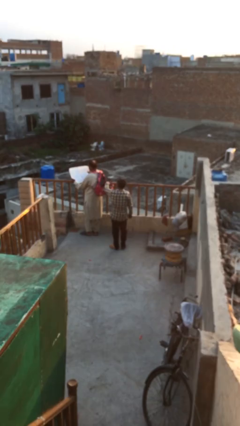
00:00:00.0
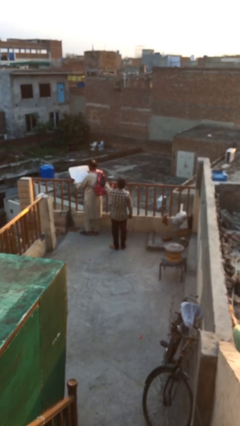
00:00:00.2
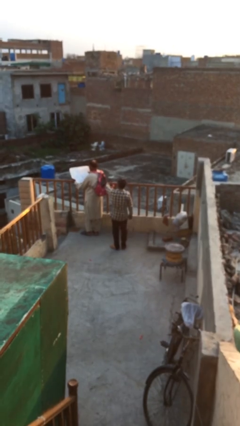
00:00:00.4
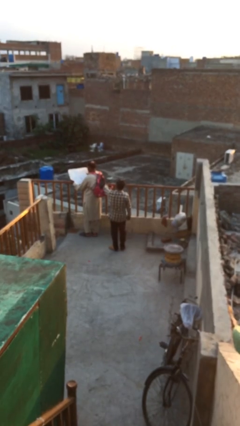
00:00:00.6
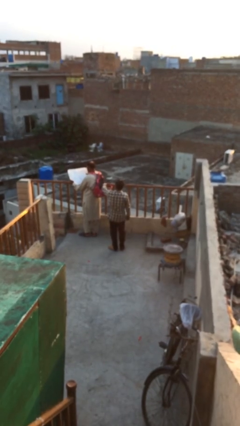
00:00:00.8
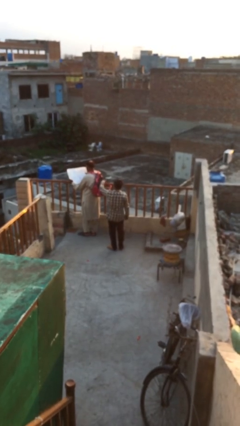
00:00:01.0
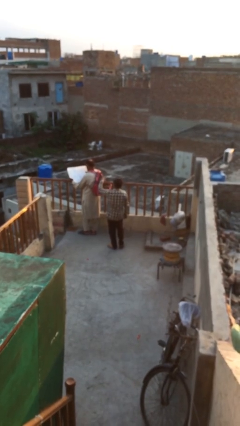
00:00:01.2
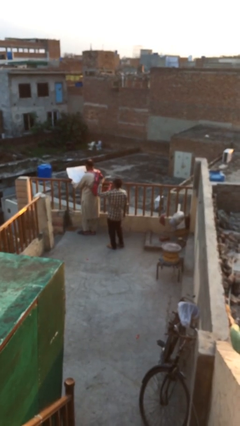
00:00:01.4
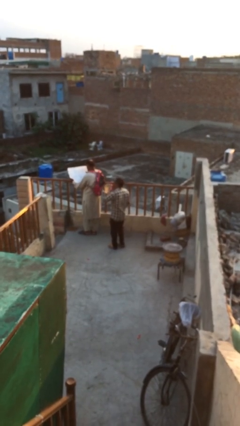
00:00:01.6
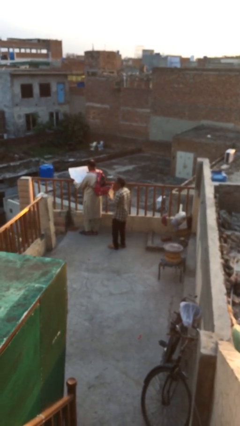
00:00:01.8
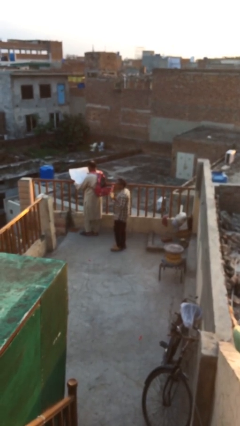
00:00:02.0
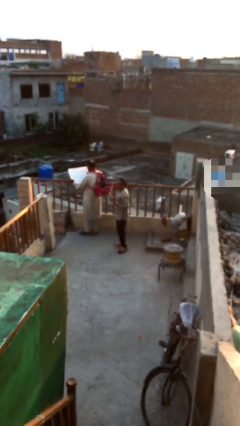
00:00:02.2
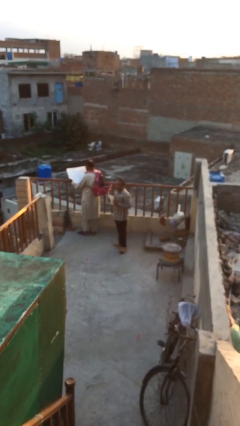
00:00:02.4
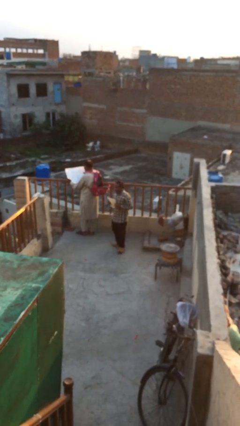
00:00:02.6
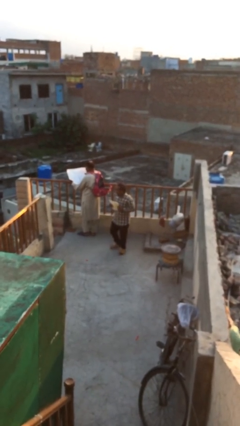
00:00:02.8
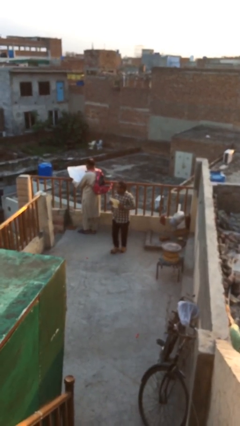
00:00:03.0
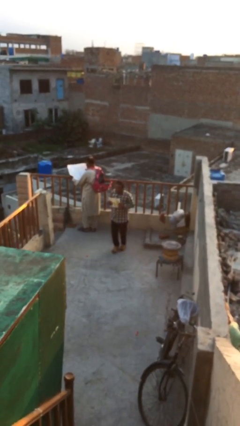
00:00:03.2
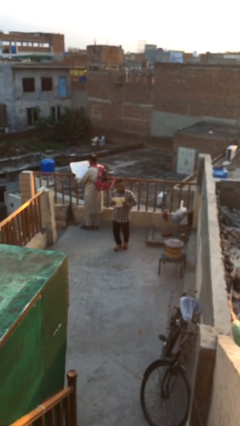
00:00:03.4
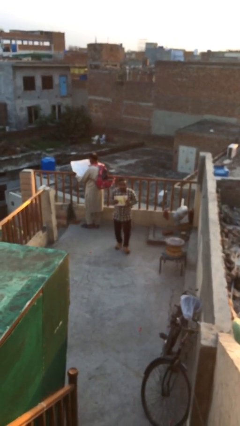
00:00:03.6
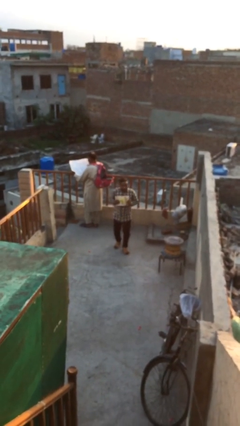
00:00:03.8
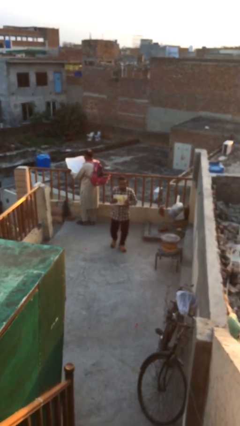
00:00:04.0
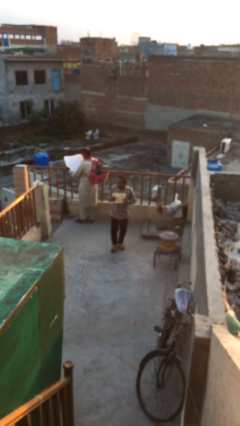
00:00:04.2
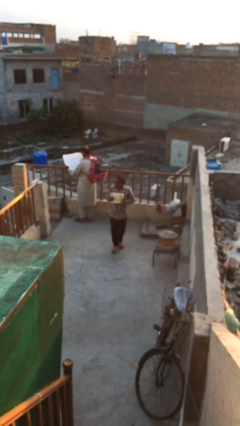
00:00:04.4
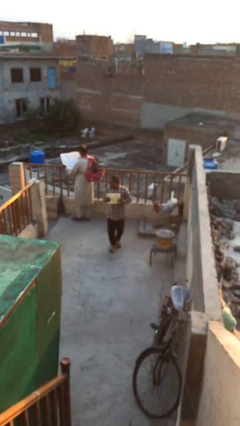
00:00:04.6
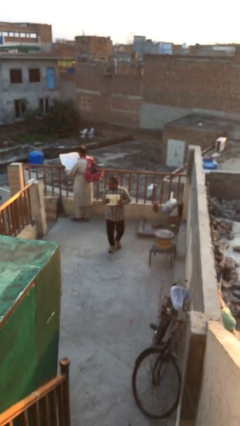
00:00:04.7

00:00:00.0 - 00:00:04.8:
person steals object from person

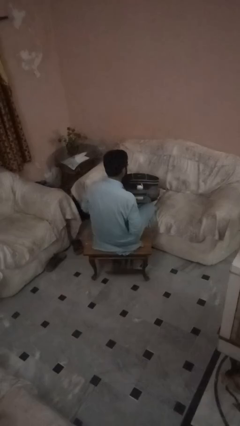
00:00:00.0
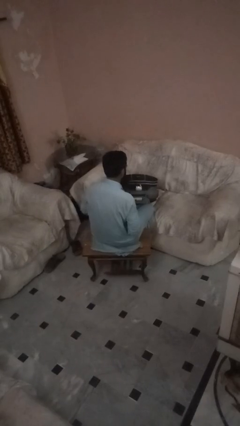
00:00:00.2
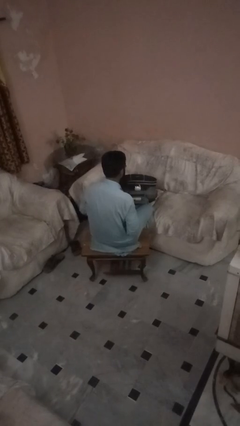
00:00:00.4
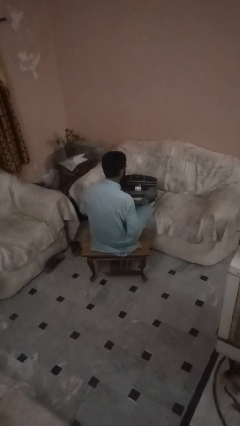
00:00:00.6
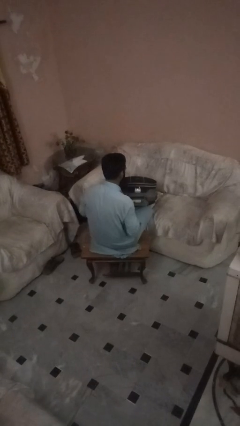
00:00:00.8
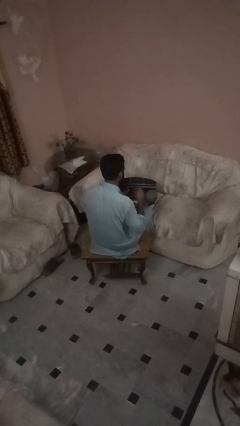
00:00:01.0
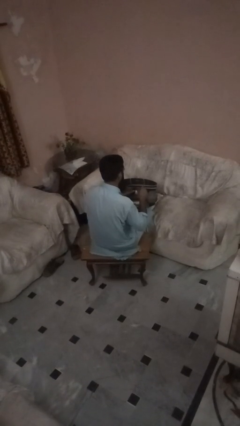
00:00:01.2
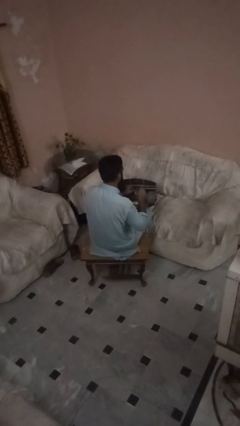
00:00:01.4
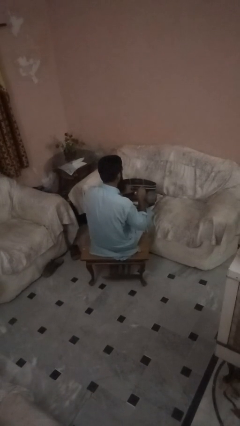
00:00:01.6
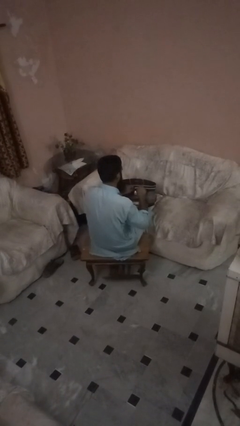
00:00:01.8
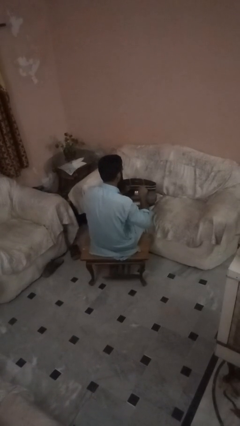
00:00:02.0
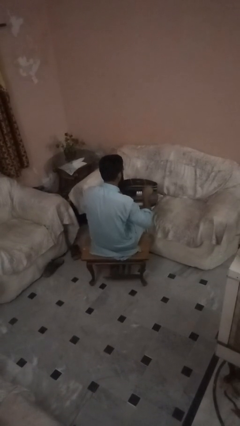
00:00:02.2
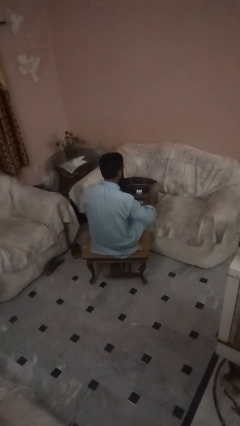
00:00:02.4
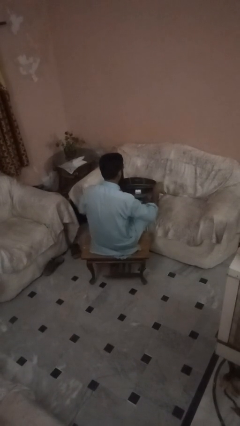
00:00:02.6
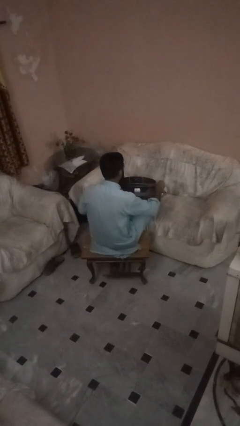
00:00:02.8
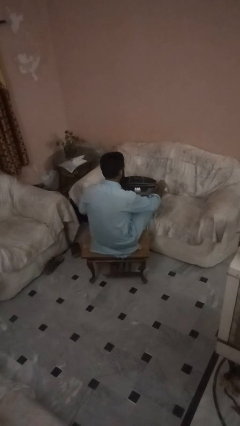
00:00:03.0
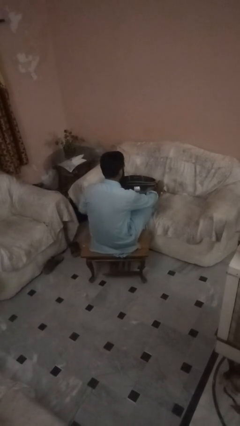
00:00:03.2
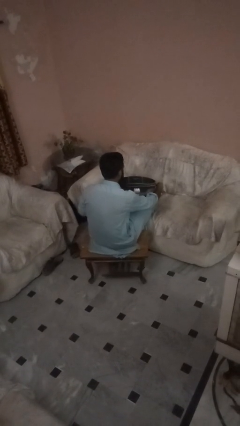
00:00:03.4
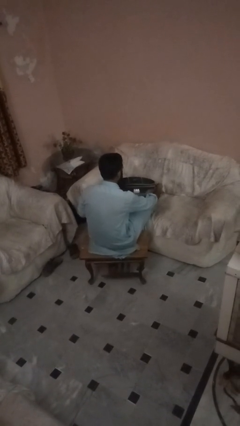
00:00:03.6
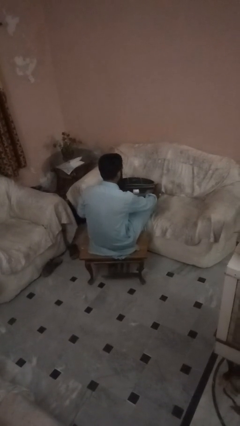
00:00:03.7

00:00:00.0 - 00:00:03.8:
person opens suitcase

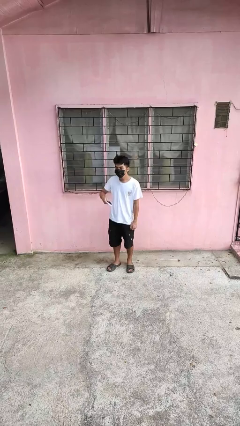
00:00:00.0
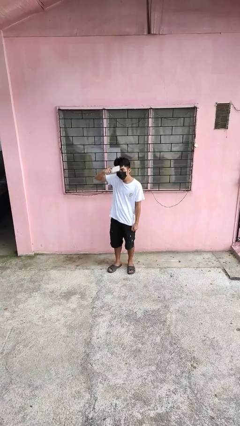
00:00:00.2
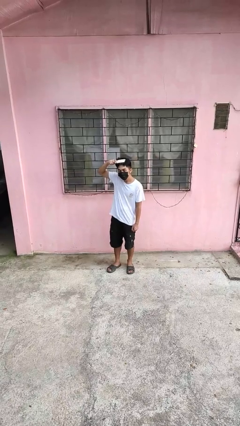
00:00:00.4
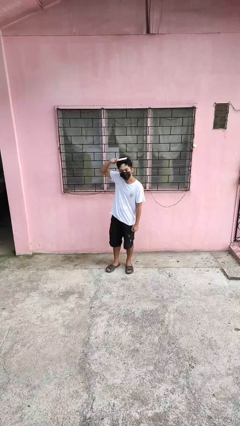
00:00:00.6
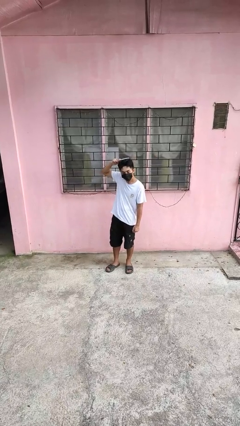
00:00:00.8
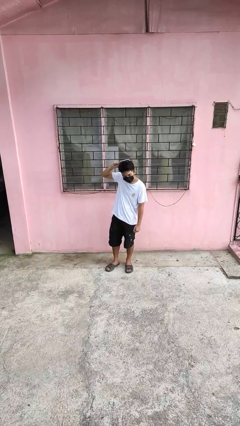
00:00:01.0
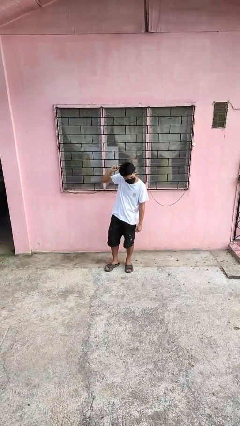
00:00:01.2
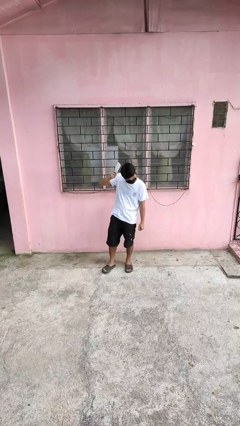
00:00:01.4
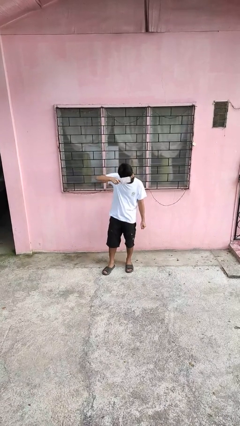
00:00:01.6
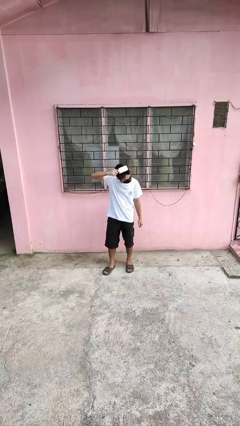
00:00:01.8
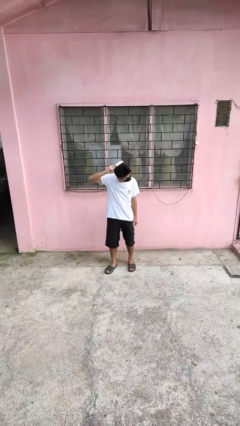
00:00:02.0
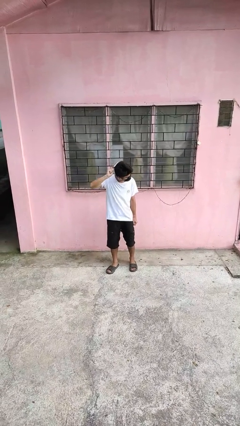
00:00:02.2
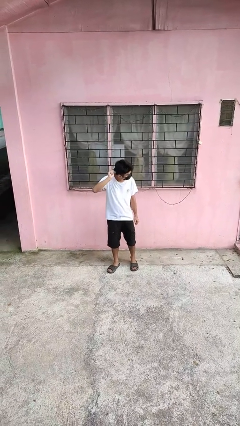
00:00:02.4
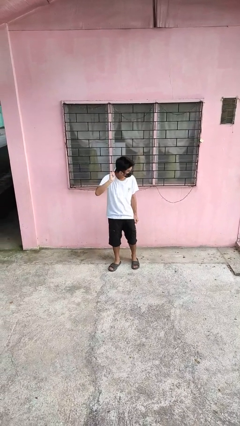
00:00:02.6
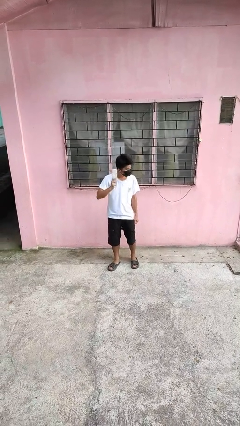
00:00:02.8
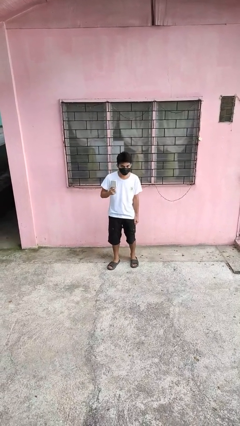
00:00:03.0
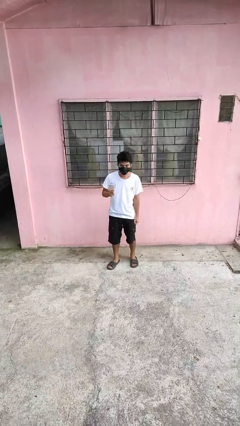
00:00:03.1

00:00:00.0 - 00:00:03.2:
person brushes hair

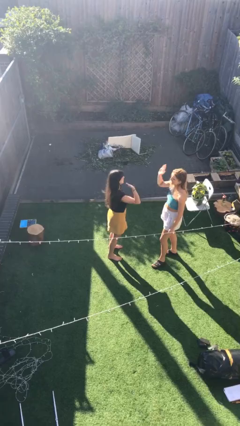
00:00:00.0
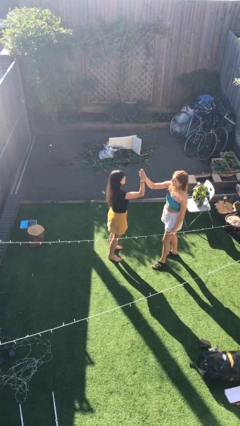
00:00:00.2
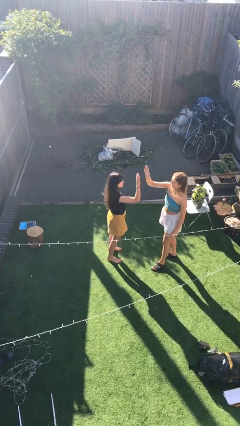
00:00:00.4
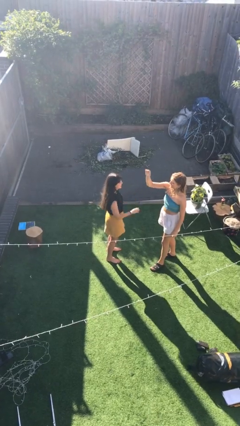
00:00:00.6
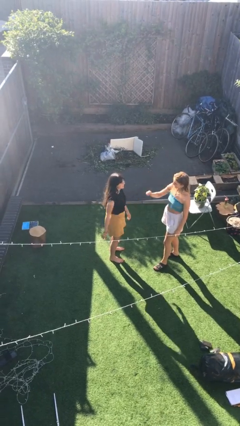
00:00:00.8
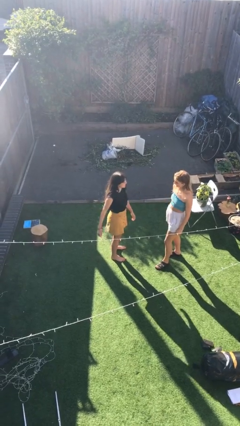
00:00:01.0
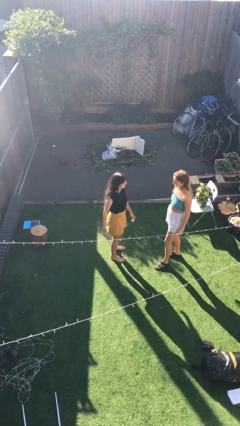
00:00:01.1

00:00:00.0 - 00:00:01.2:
person highfives hand

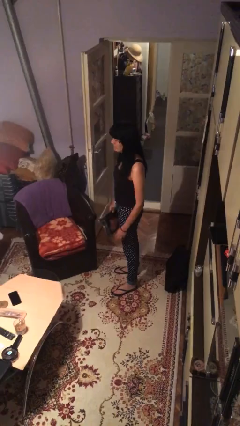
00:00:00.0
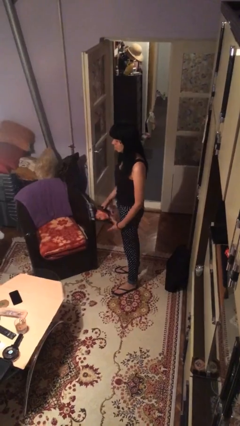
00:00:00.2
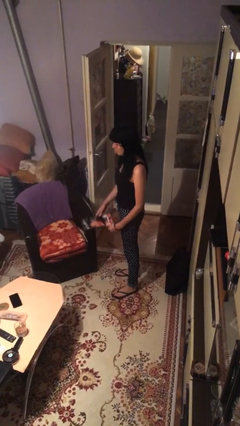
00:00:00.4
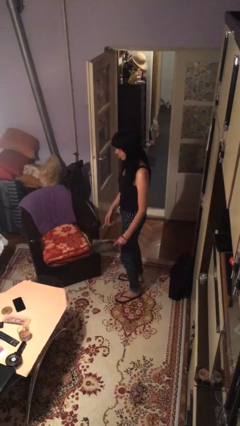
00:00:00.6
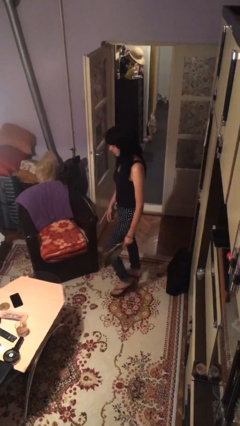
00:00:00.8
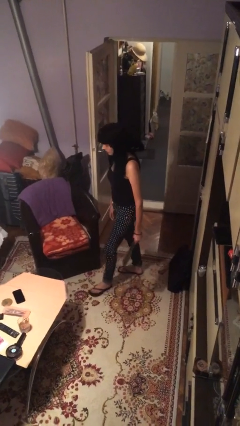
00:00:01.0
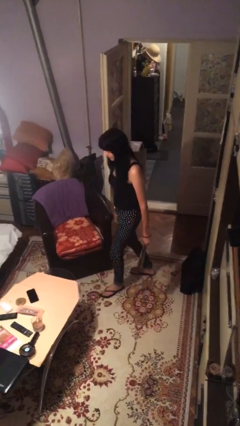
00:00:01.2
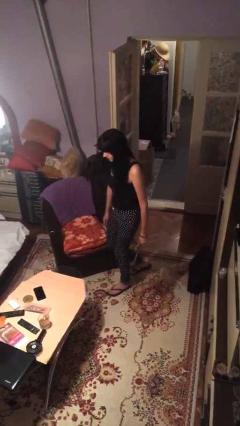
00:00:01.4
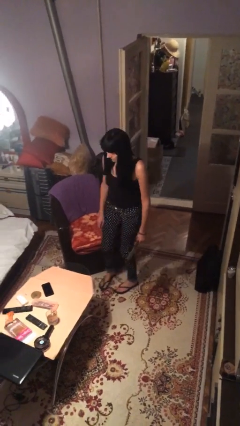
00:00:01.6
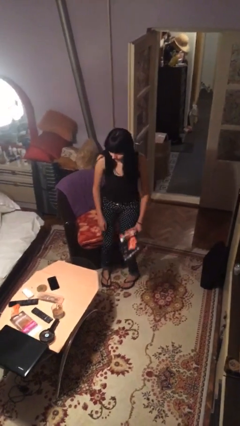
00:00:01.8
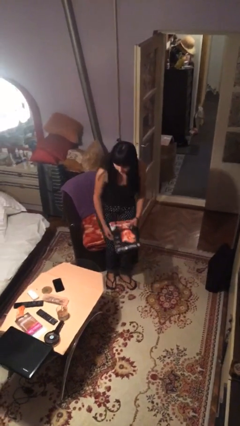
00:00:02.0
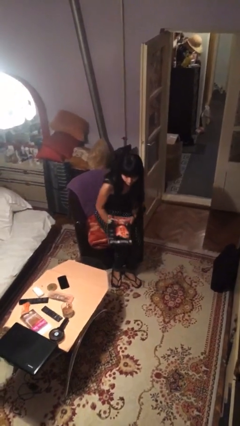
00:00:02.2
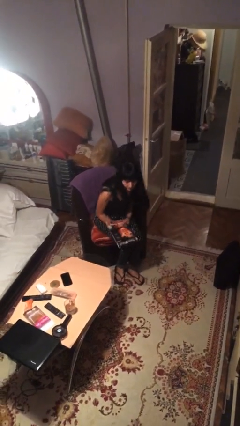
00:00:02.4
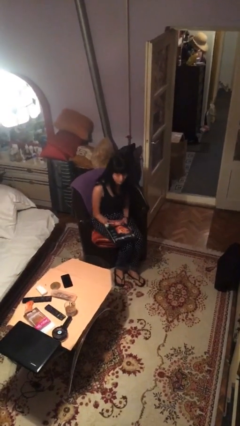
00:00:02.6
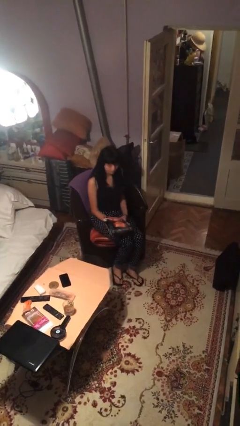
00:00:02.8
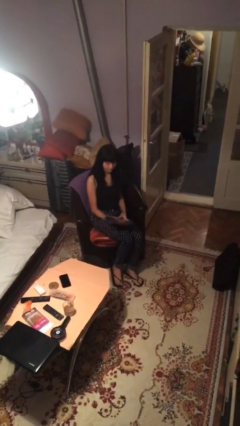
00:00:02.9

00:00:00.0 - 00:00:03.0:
person sits down

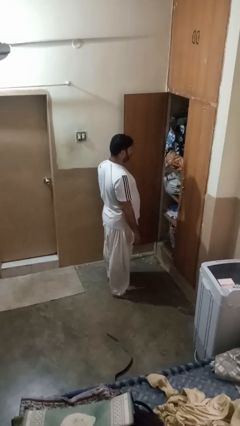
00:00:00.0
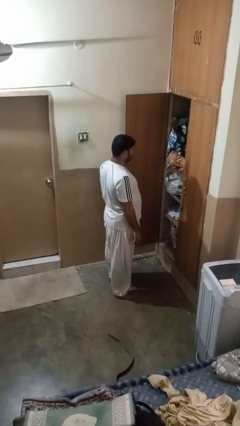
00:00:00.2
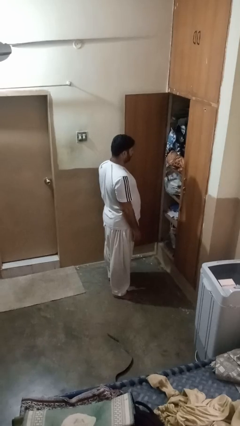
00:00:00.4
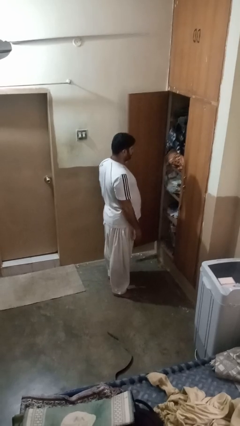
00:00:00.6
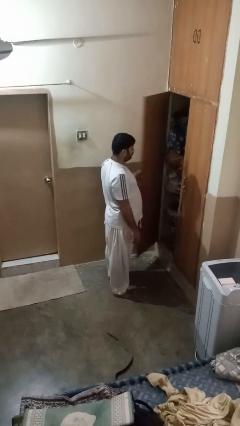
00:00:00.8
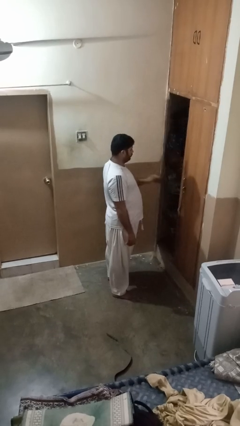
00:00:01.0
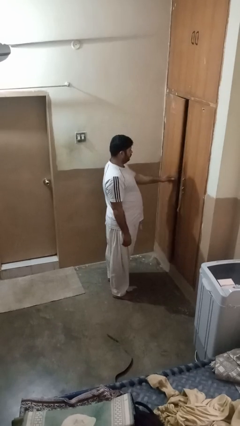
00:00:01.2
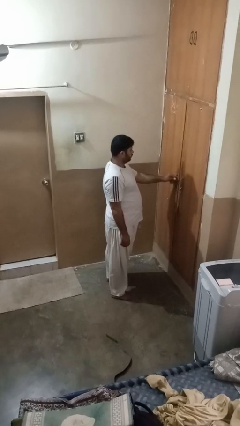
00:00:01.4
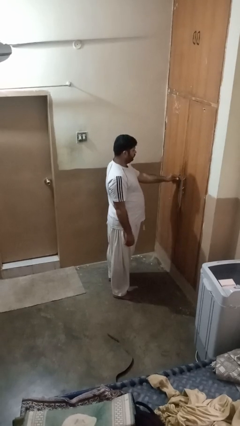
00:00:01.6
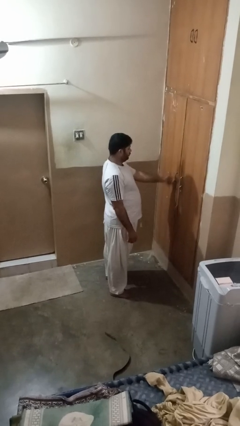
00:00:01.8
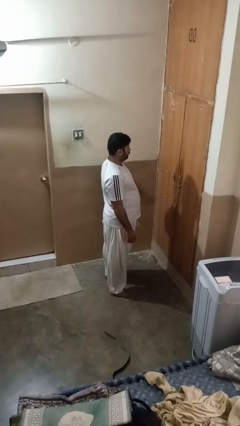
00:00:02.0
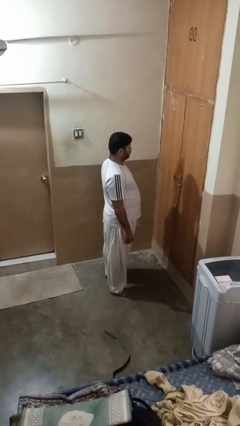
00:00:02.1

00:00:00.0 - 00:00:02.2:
person closes closet door
